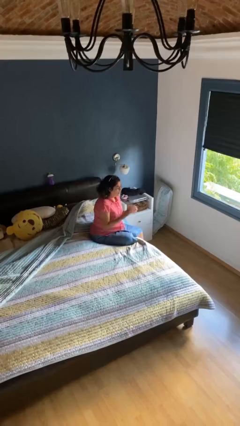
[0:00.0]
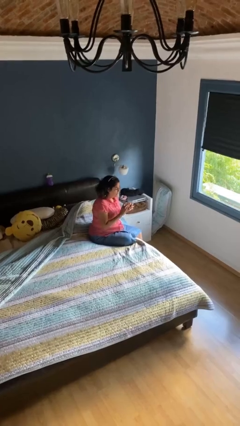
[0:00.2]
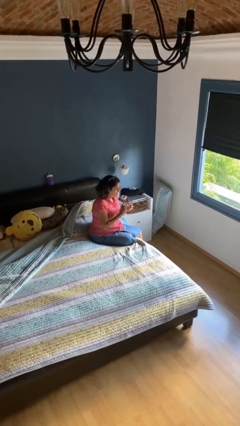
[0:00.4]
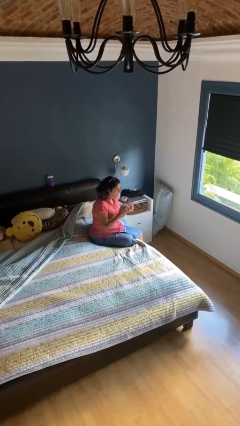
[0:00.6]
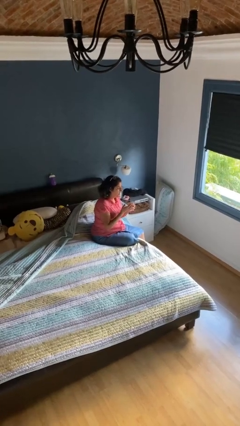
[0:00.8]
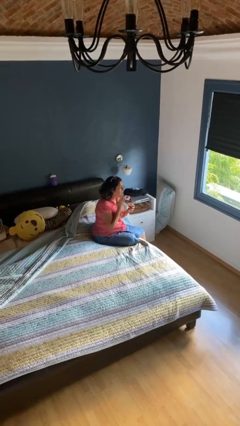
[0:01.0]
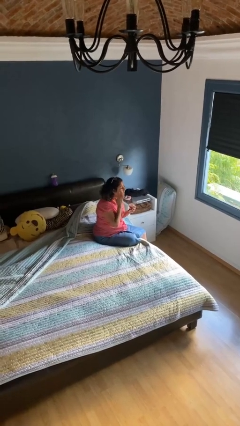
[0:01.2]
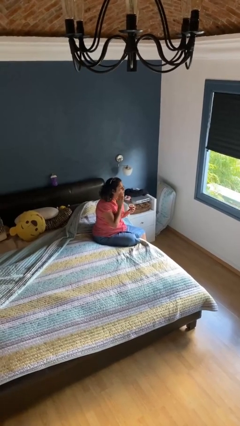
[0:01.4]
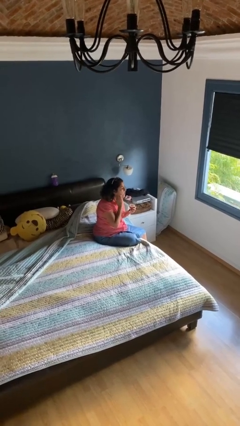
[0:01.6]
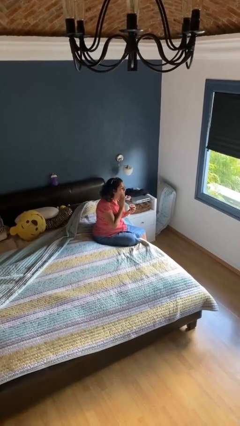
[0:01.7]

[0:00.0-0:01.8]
person applies facial moisturizer

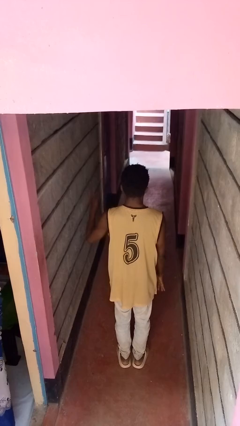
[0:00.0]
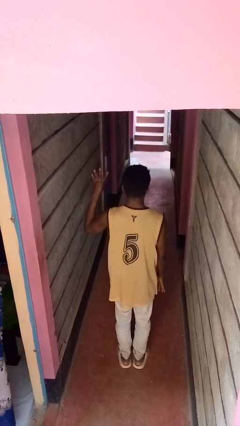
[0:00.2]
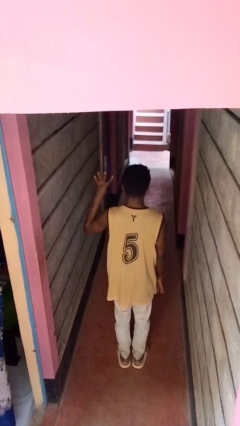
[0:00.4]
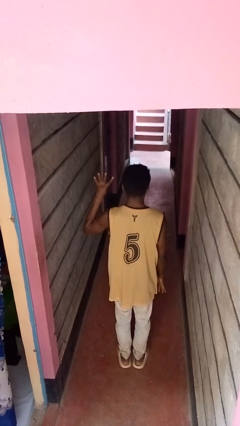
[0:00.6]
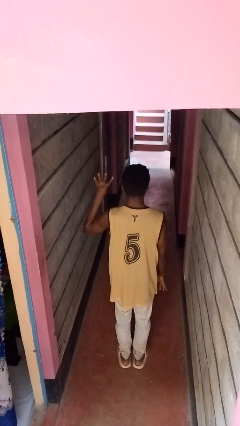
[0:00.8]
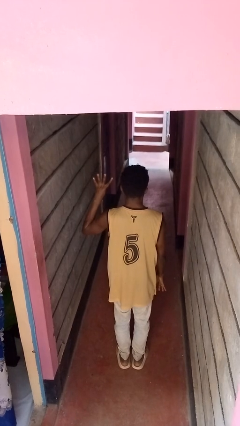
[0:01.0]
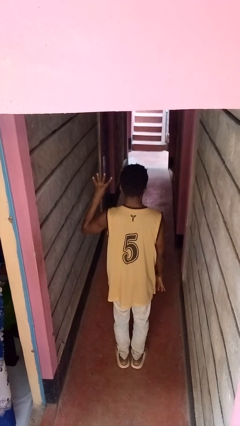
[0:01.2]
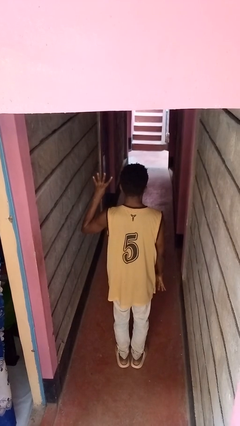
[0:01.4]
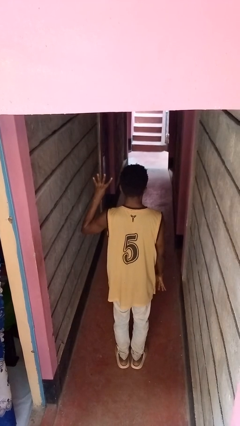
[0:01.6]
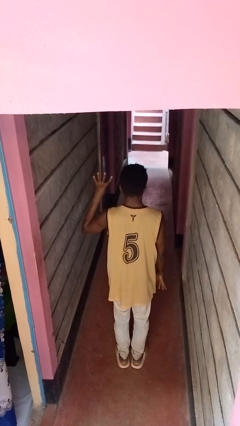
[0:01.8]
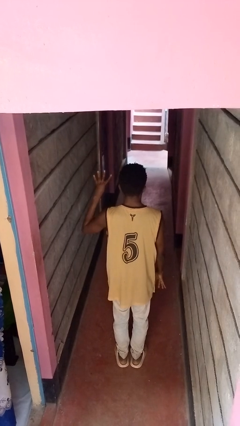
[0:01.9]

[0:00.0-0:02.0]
person gestures number four

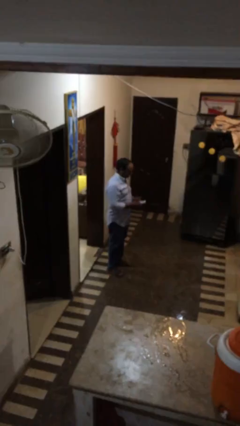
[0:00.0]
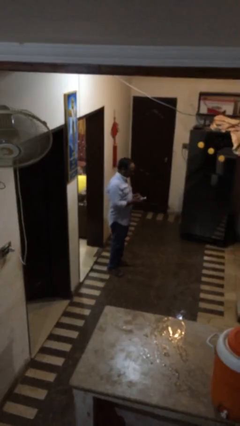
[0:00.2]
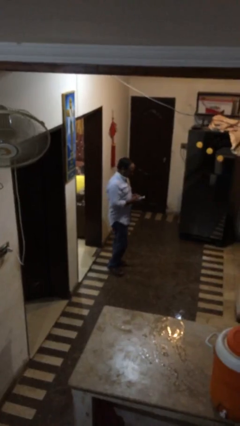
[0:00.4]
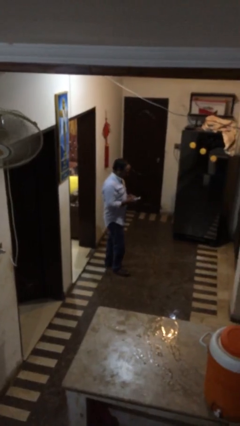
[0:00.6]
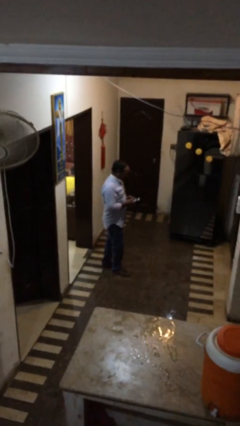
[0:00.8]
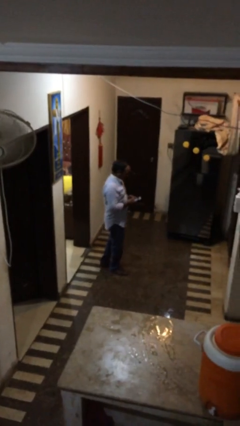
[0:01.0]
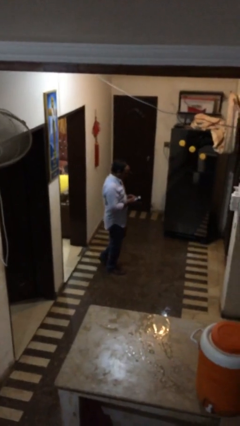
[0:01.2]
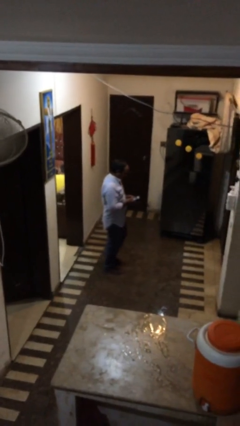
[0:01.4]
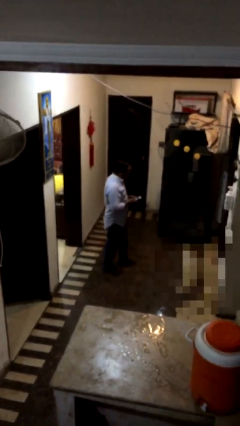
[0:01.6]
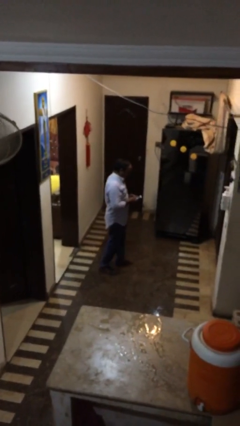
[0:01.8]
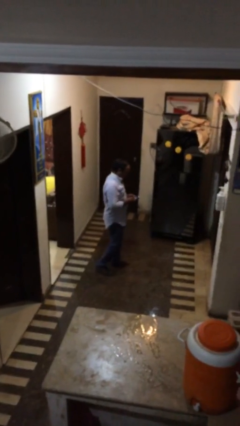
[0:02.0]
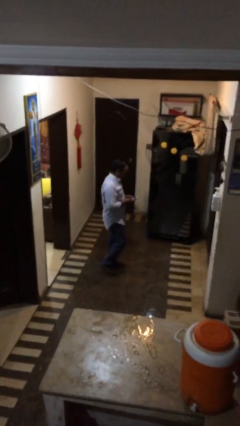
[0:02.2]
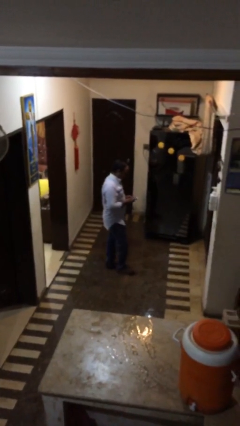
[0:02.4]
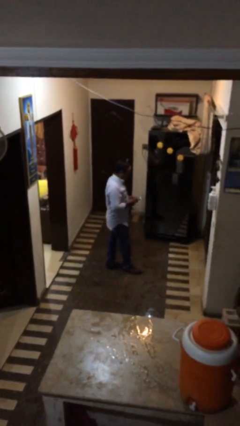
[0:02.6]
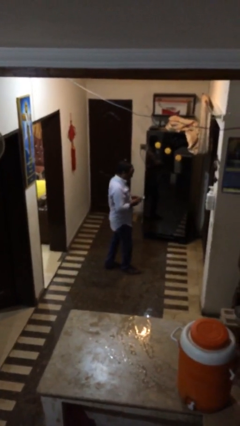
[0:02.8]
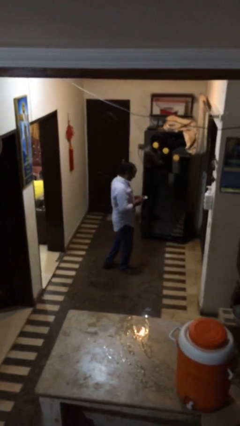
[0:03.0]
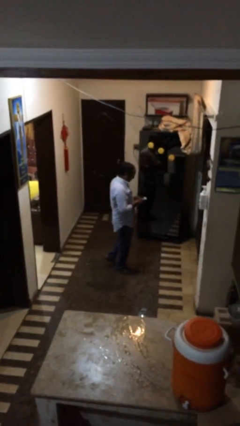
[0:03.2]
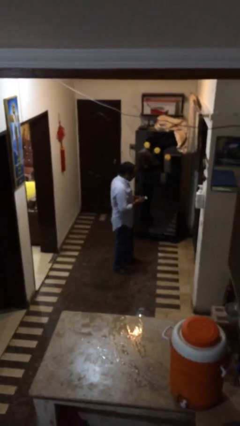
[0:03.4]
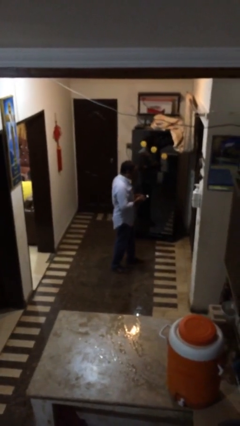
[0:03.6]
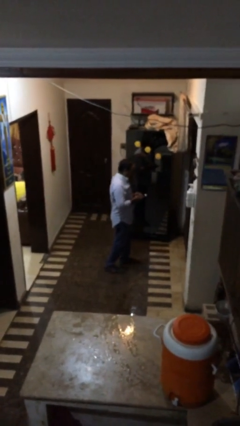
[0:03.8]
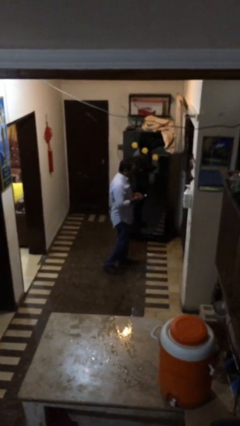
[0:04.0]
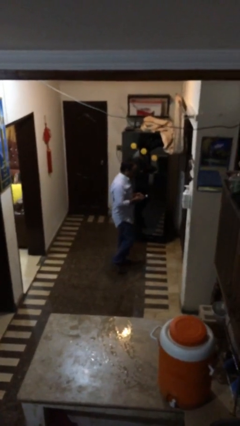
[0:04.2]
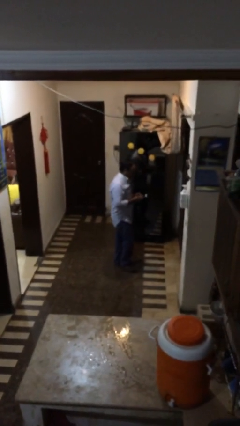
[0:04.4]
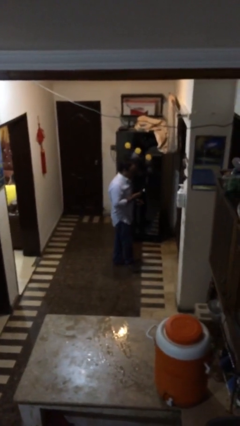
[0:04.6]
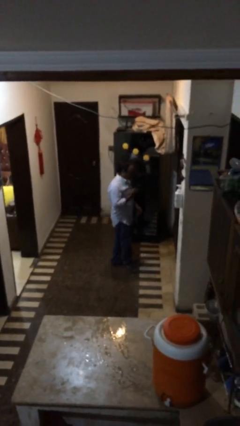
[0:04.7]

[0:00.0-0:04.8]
person texts on phone

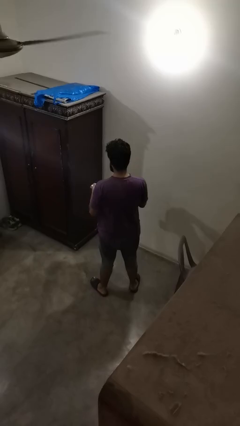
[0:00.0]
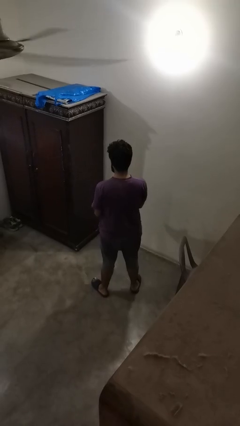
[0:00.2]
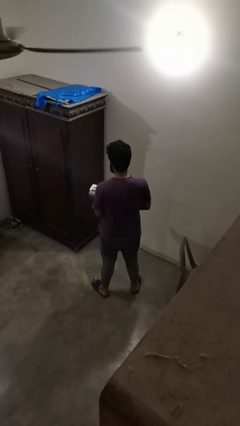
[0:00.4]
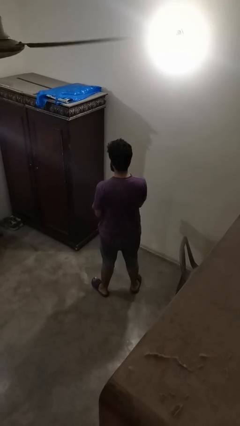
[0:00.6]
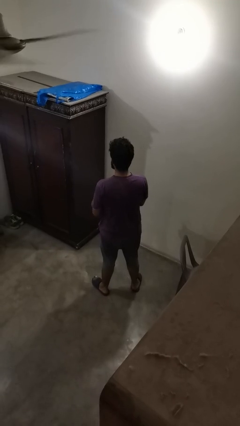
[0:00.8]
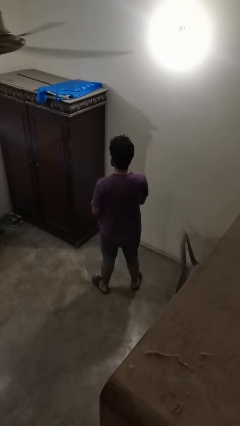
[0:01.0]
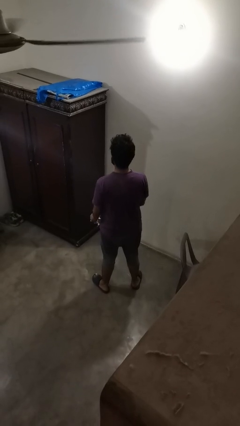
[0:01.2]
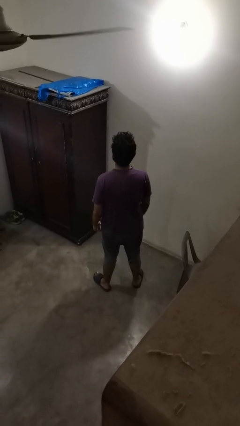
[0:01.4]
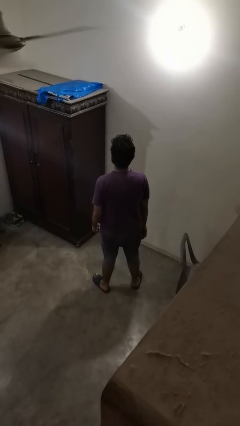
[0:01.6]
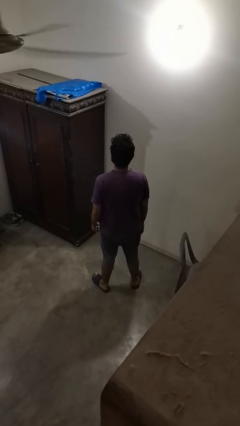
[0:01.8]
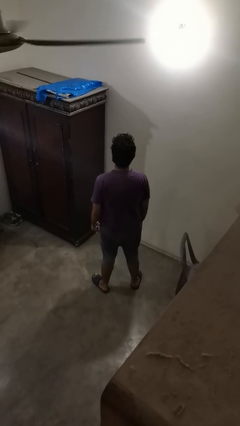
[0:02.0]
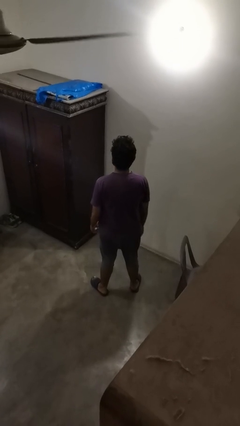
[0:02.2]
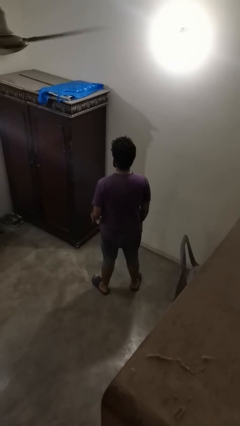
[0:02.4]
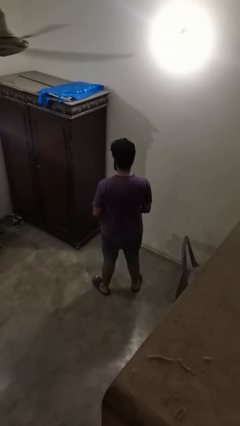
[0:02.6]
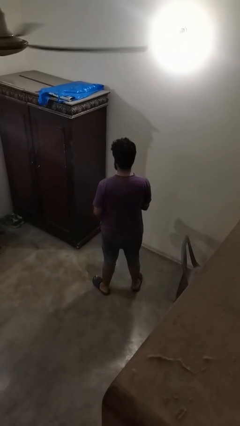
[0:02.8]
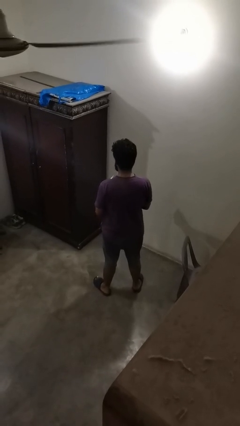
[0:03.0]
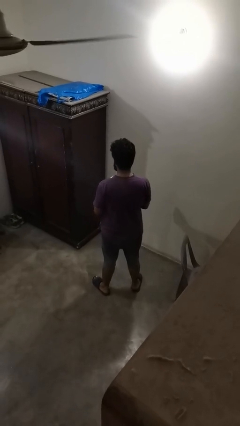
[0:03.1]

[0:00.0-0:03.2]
person crumples paper

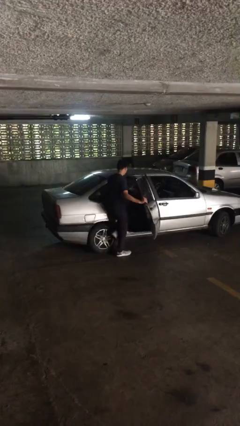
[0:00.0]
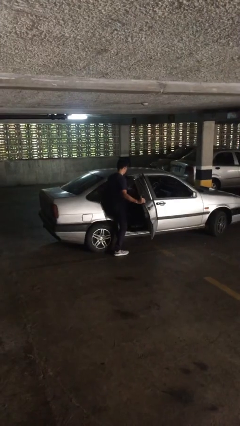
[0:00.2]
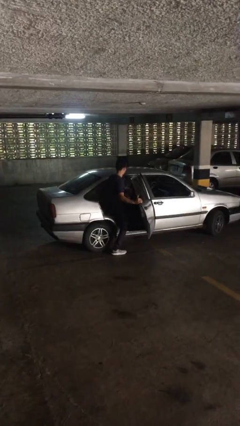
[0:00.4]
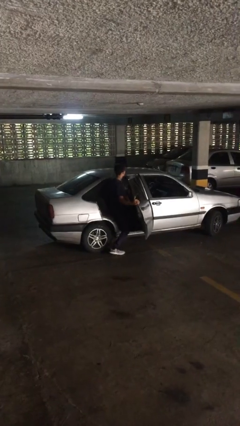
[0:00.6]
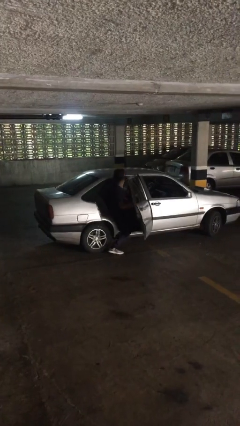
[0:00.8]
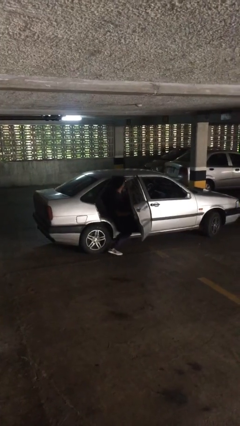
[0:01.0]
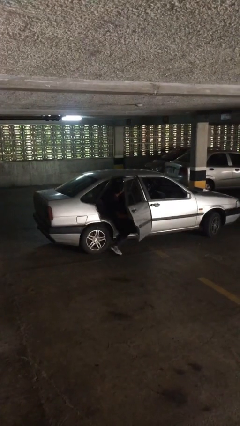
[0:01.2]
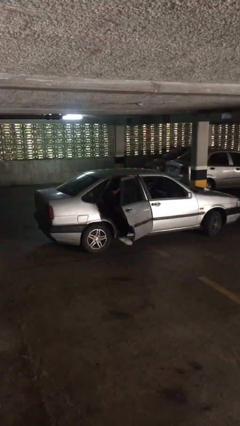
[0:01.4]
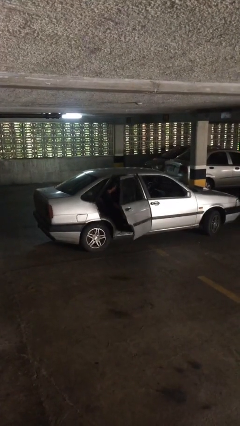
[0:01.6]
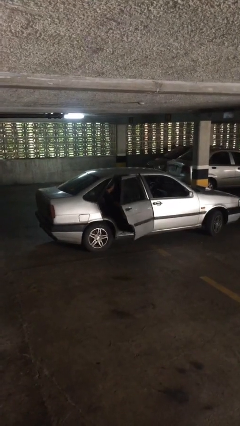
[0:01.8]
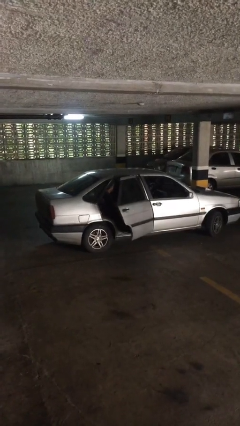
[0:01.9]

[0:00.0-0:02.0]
person enters car

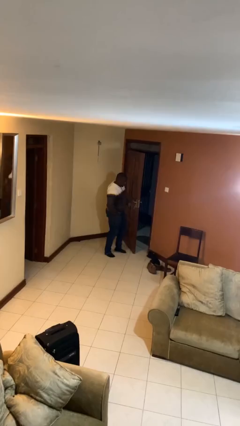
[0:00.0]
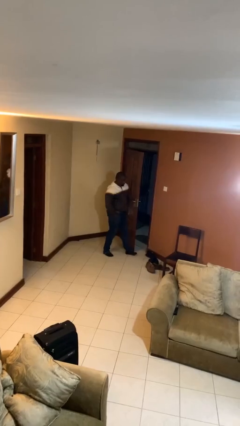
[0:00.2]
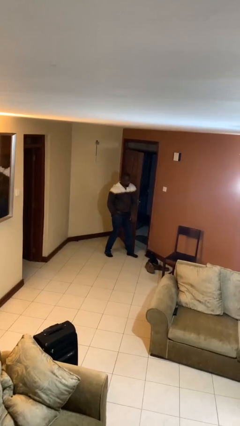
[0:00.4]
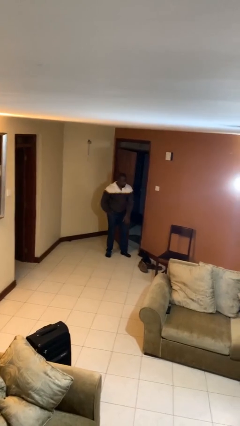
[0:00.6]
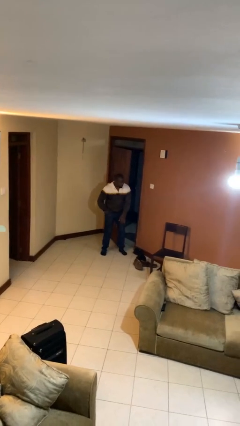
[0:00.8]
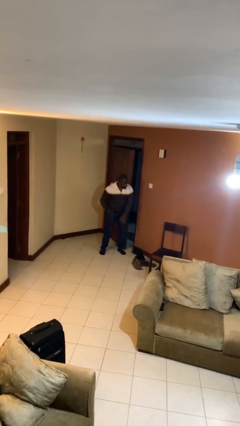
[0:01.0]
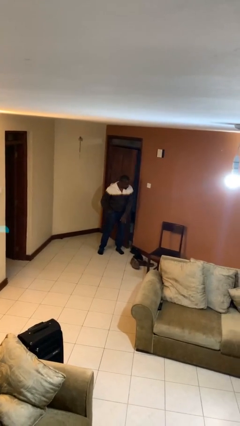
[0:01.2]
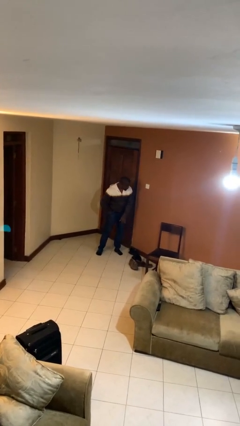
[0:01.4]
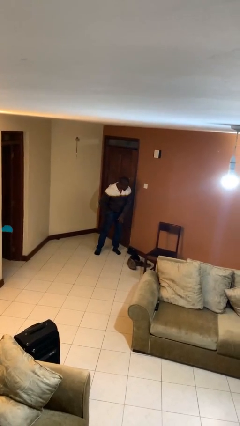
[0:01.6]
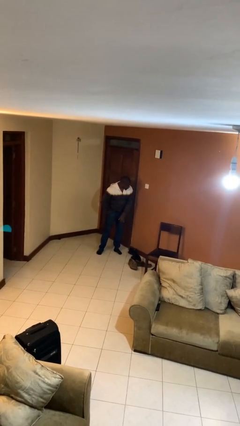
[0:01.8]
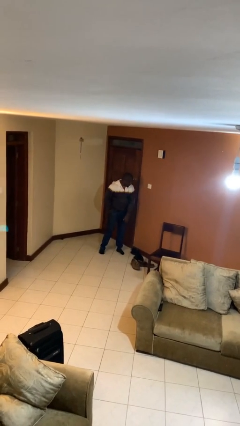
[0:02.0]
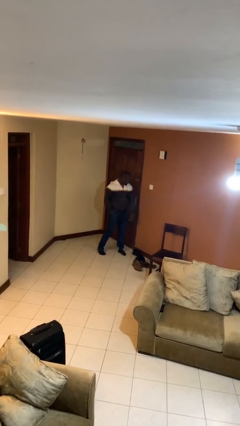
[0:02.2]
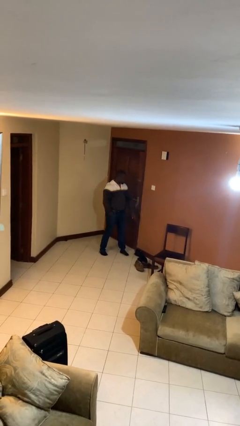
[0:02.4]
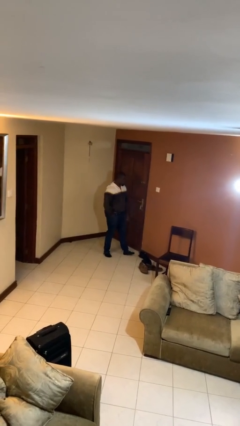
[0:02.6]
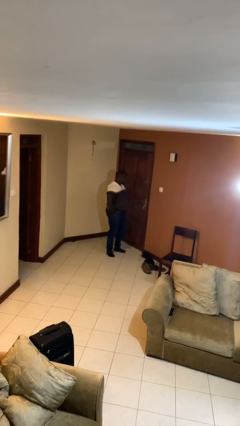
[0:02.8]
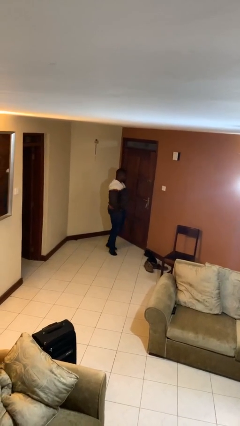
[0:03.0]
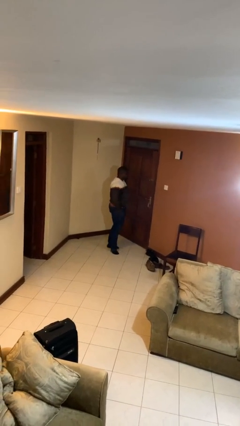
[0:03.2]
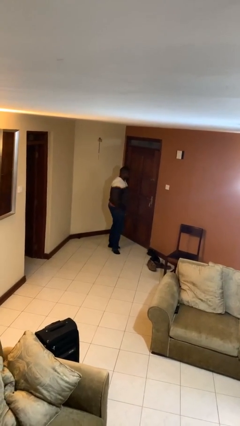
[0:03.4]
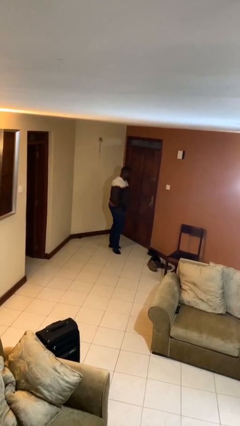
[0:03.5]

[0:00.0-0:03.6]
person closes door with hip
